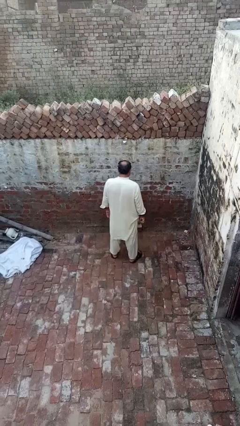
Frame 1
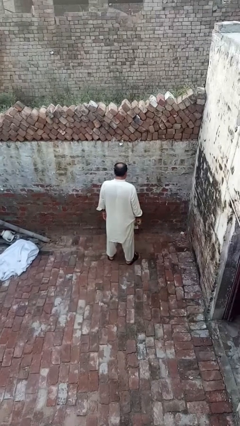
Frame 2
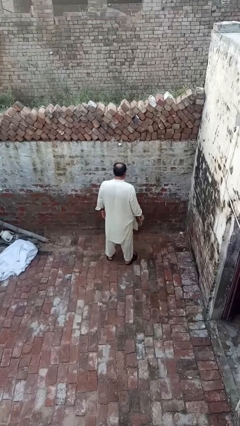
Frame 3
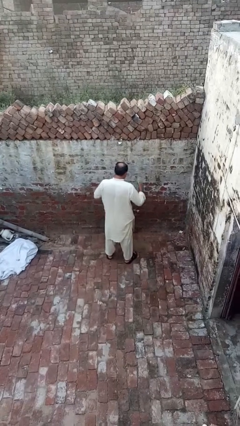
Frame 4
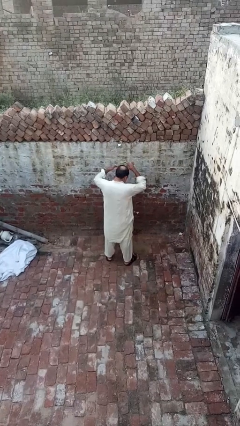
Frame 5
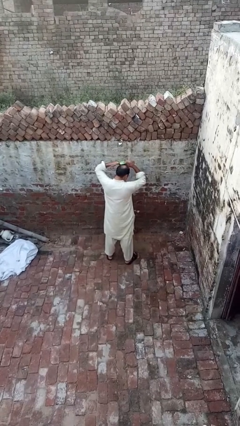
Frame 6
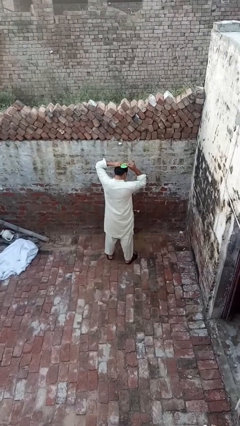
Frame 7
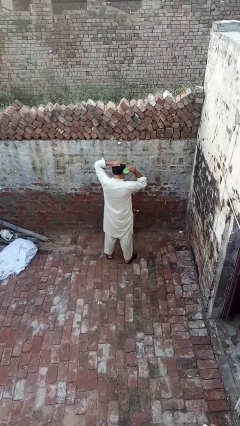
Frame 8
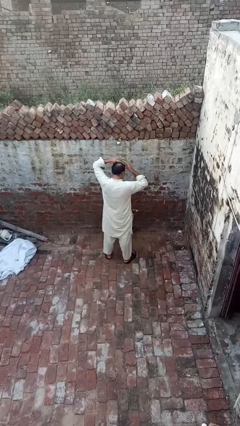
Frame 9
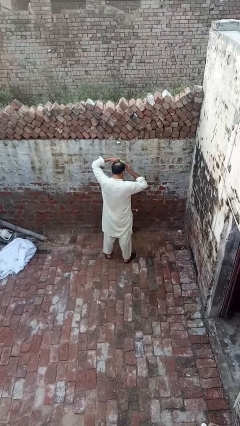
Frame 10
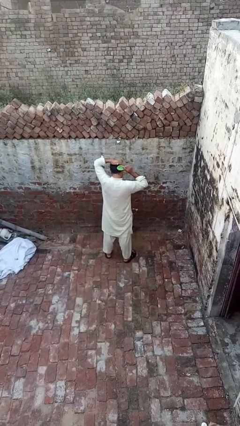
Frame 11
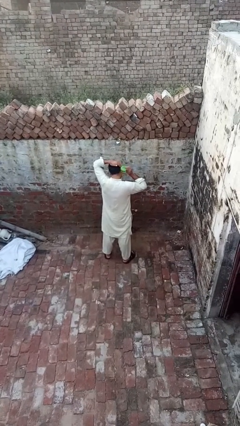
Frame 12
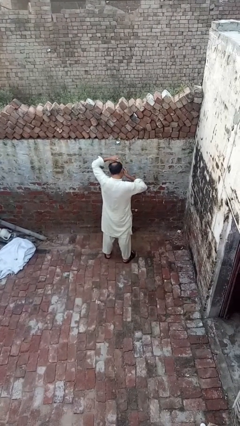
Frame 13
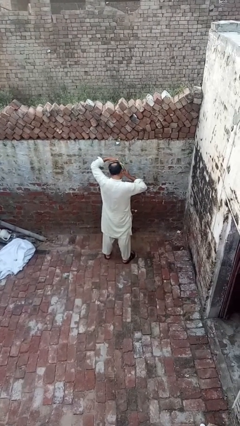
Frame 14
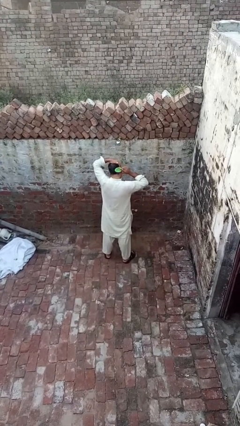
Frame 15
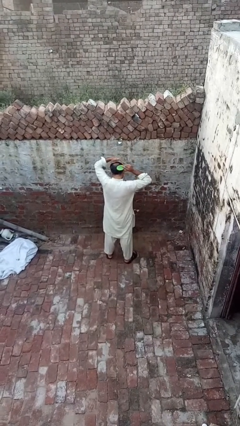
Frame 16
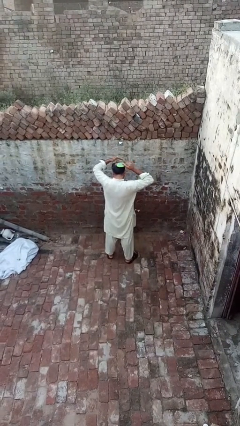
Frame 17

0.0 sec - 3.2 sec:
person brushes hair

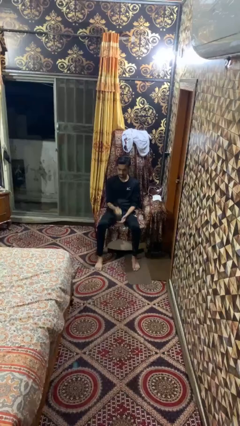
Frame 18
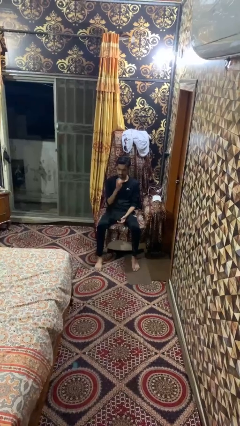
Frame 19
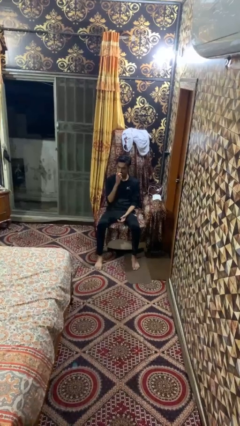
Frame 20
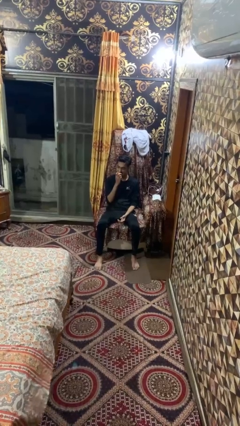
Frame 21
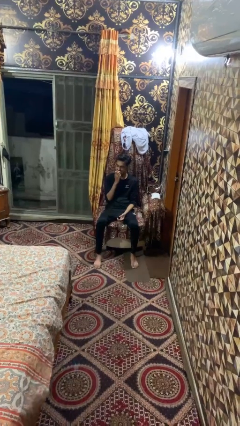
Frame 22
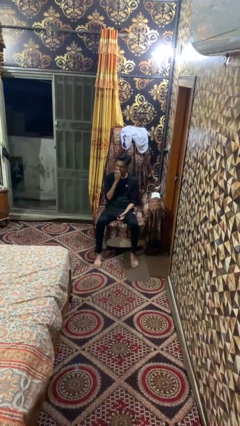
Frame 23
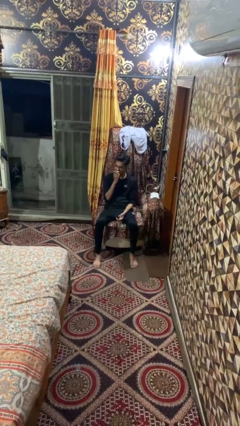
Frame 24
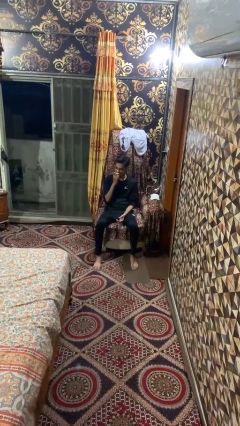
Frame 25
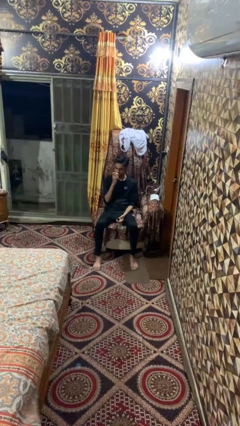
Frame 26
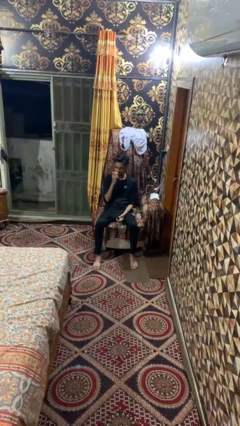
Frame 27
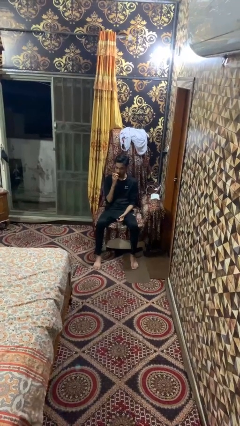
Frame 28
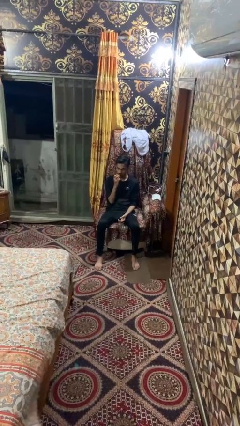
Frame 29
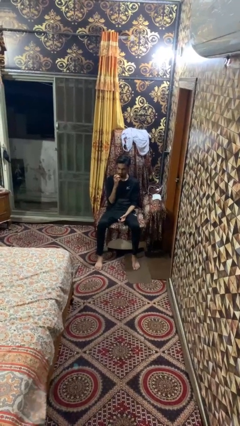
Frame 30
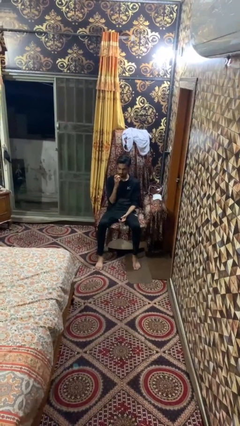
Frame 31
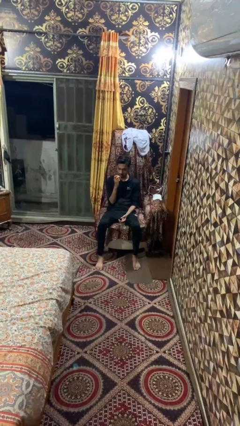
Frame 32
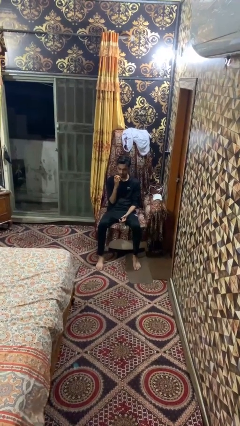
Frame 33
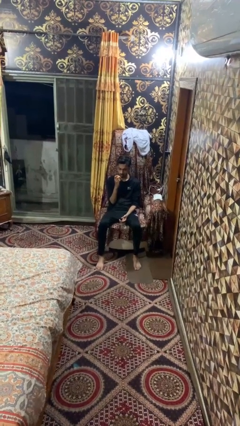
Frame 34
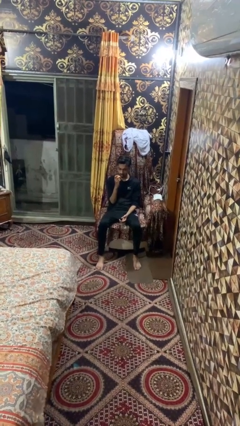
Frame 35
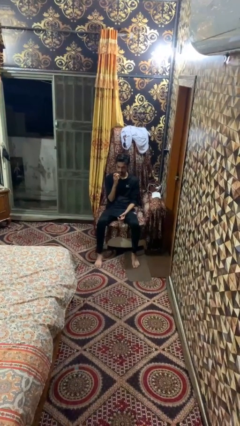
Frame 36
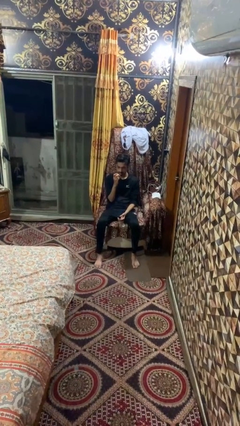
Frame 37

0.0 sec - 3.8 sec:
person eats apple

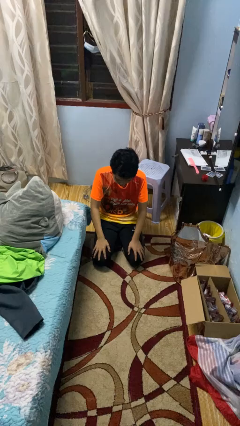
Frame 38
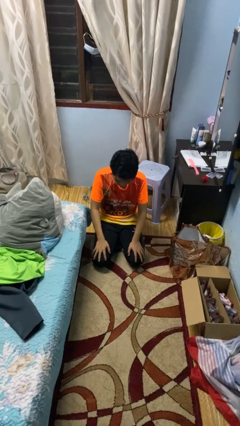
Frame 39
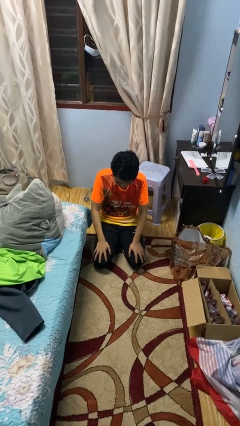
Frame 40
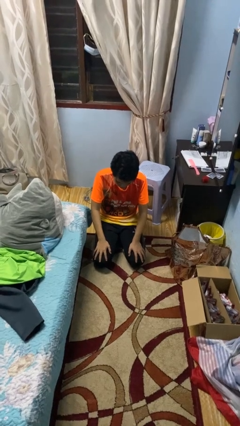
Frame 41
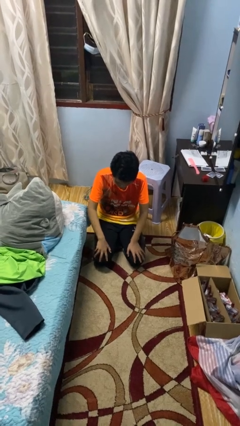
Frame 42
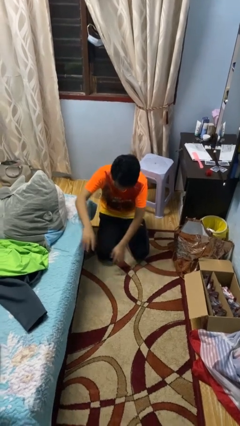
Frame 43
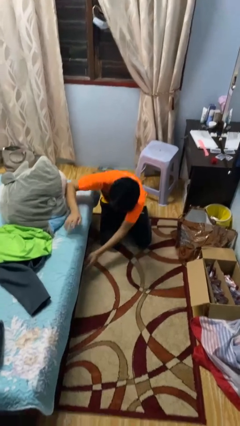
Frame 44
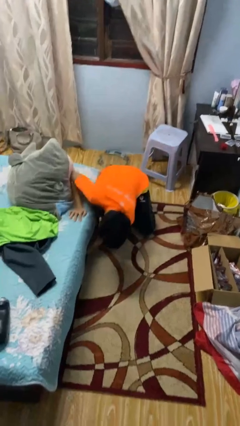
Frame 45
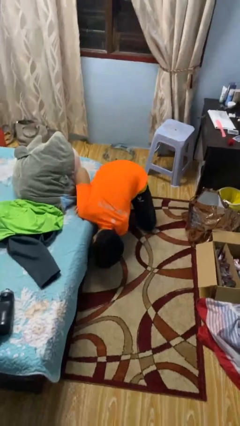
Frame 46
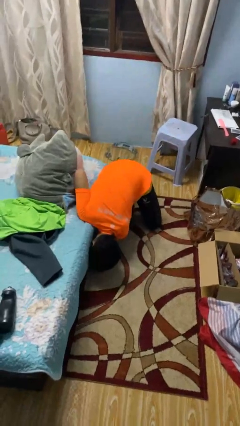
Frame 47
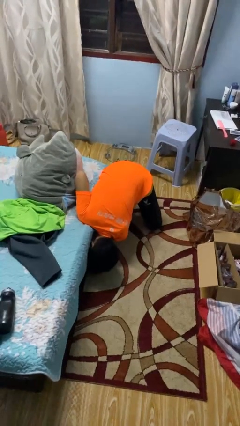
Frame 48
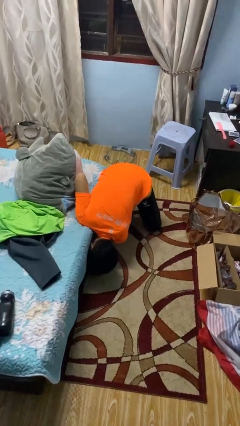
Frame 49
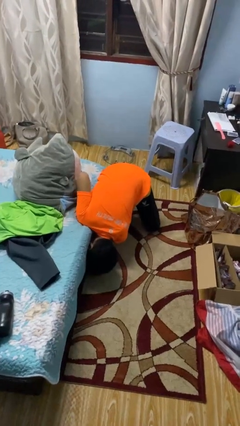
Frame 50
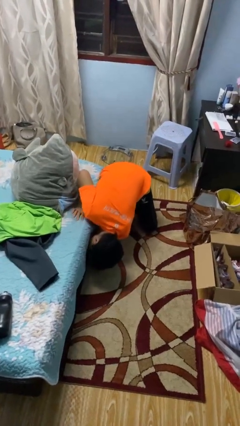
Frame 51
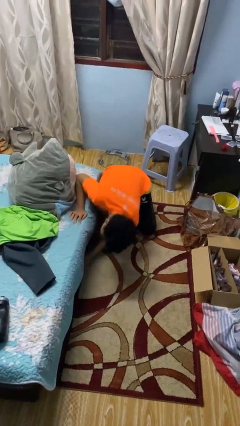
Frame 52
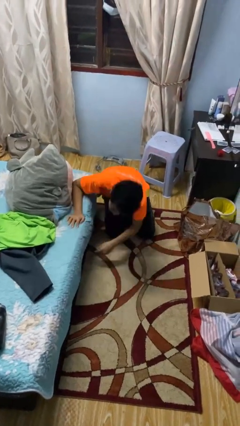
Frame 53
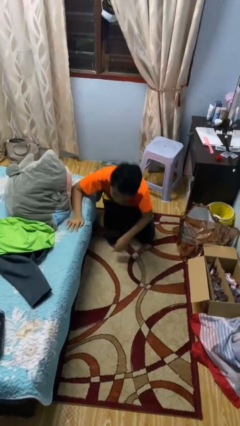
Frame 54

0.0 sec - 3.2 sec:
person searches under bed

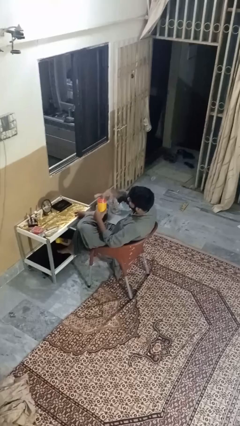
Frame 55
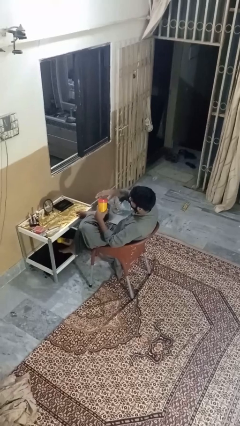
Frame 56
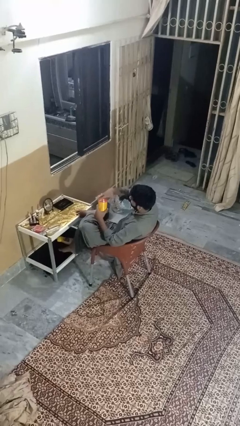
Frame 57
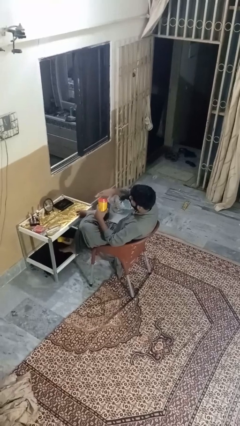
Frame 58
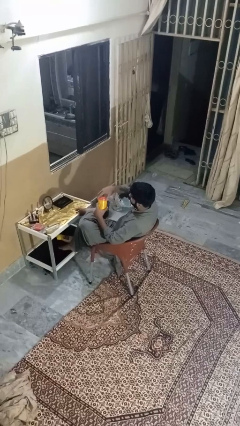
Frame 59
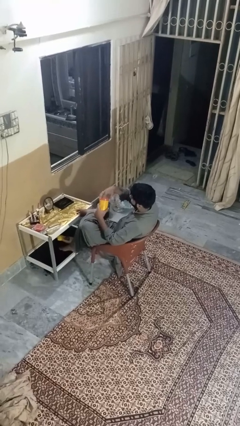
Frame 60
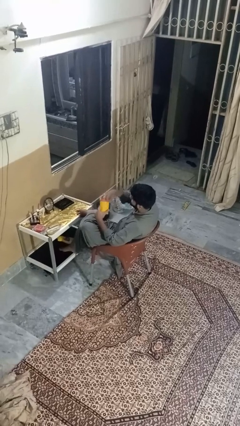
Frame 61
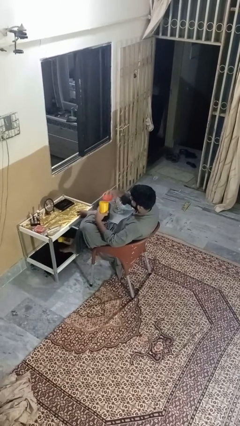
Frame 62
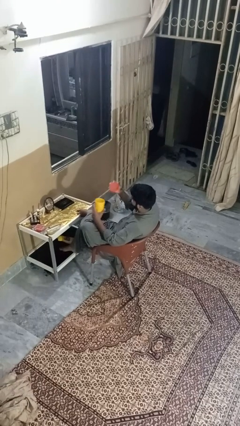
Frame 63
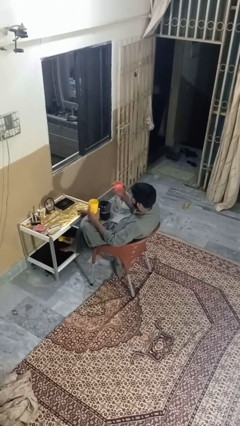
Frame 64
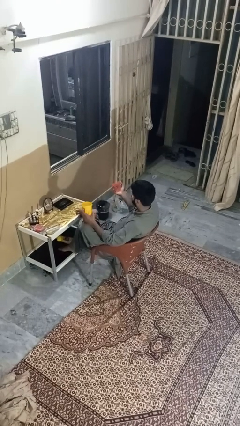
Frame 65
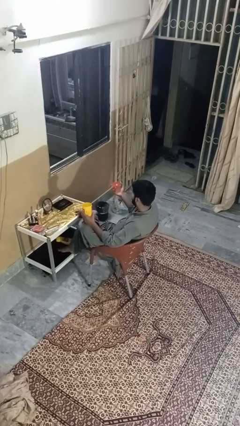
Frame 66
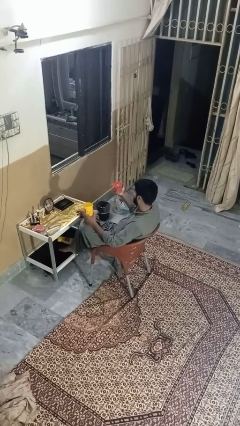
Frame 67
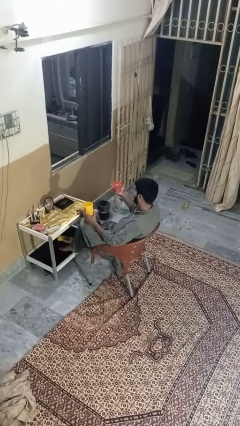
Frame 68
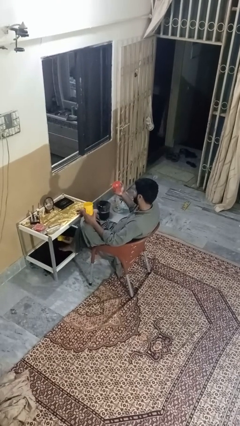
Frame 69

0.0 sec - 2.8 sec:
person opens jar

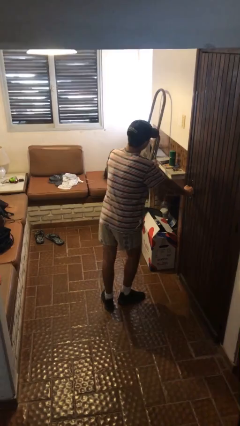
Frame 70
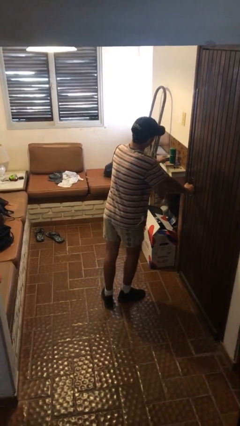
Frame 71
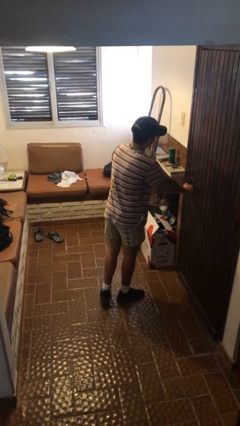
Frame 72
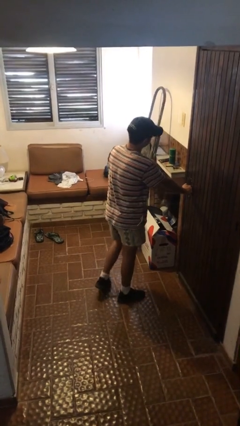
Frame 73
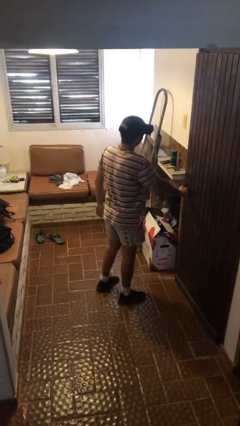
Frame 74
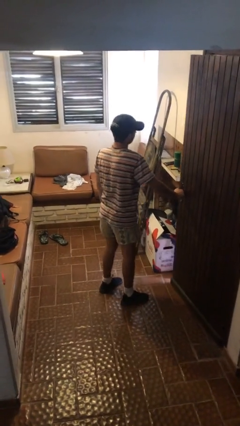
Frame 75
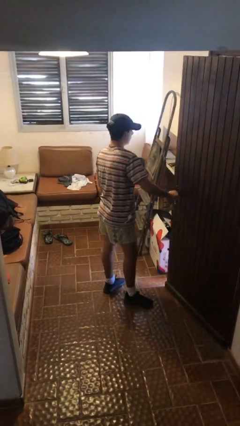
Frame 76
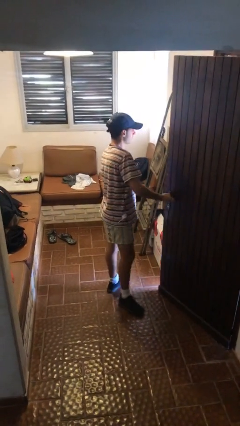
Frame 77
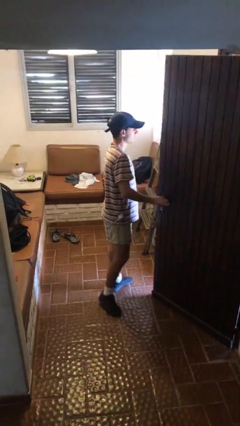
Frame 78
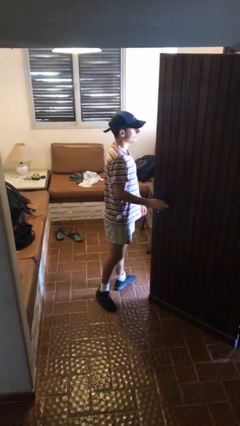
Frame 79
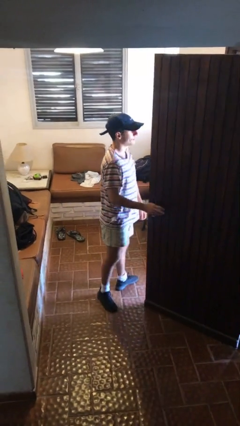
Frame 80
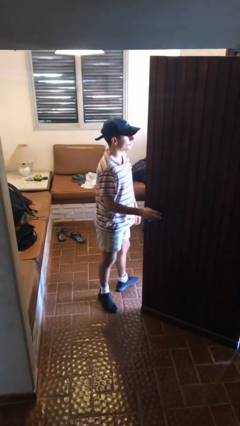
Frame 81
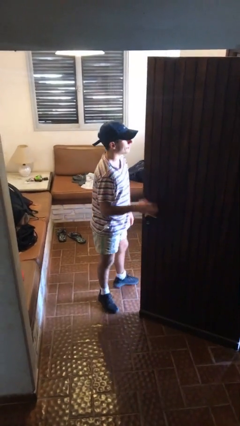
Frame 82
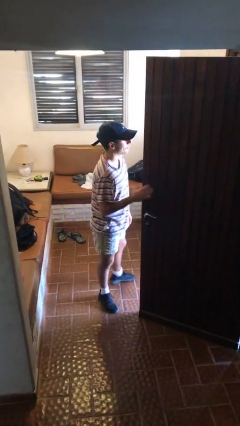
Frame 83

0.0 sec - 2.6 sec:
person opens facility door

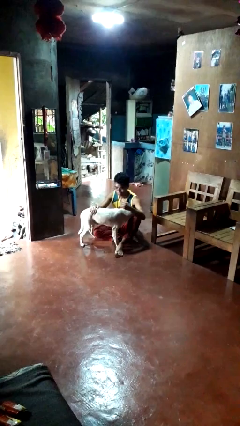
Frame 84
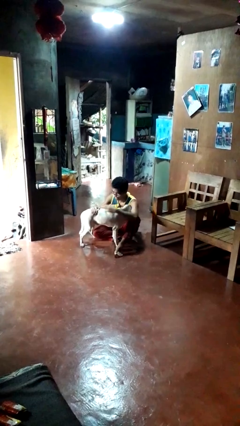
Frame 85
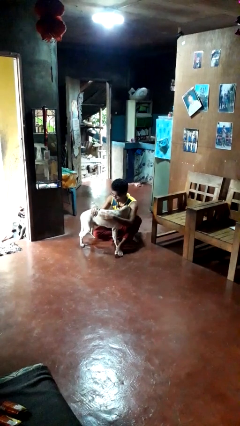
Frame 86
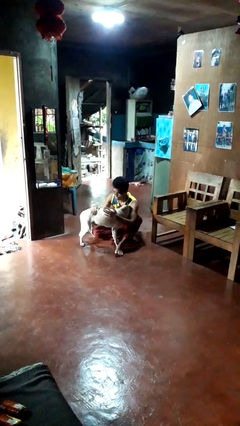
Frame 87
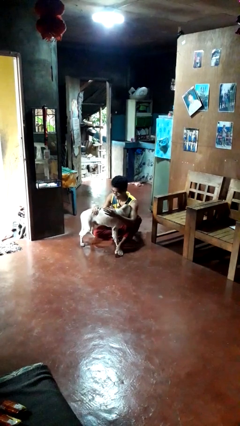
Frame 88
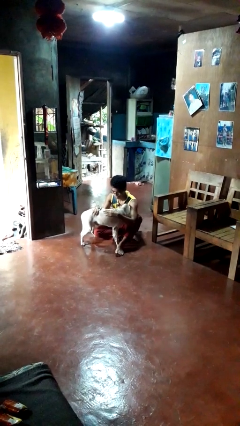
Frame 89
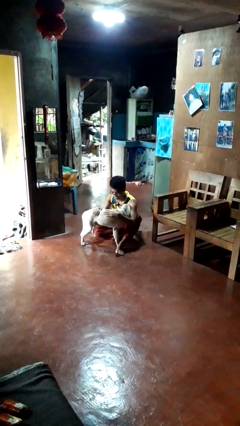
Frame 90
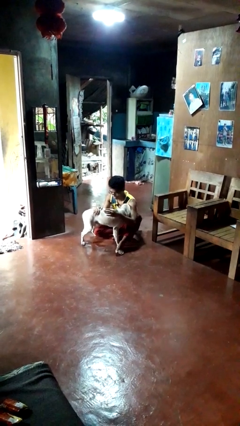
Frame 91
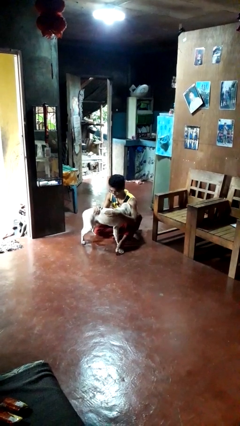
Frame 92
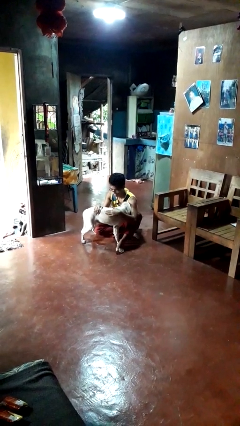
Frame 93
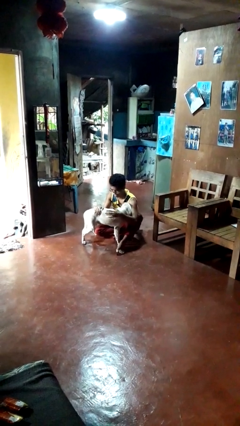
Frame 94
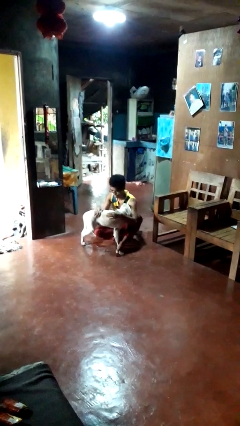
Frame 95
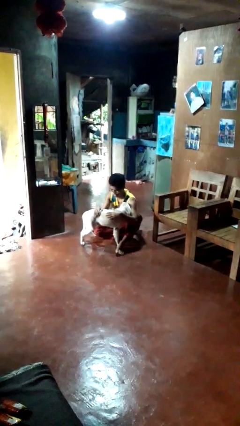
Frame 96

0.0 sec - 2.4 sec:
person hugs dog
